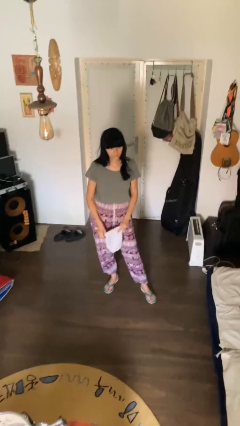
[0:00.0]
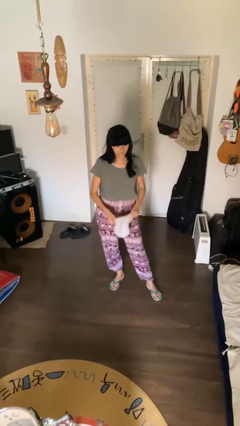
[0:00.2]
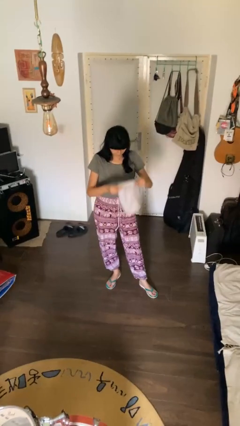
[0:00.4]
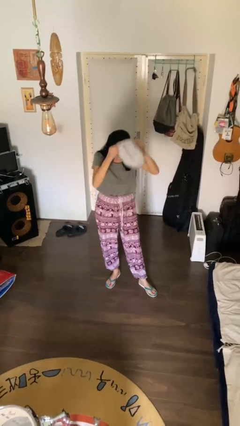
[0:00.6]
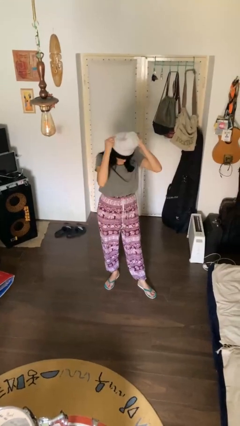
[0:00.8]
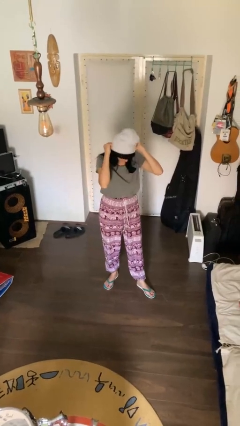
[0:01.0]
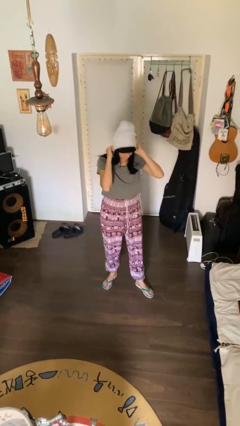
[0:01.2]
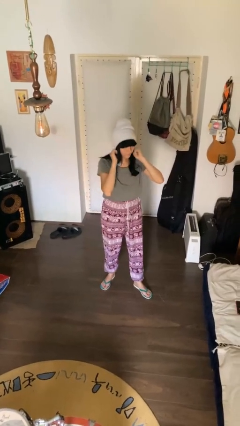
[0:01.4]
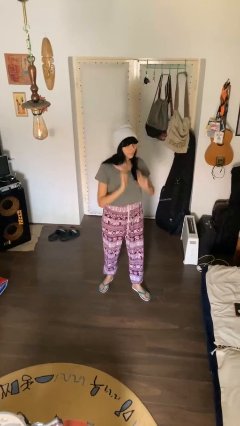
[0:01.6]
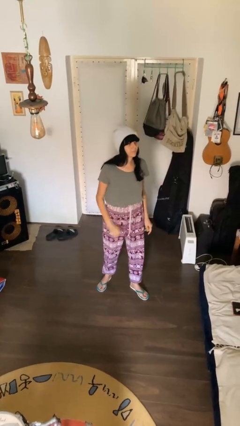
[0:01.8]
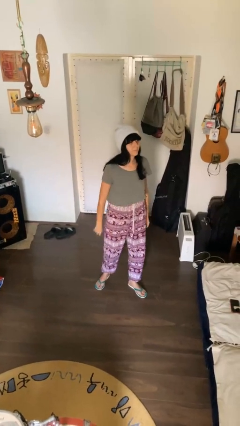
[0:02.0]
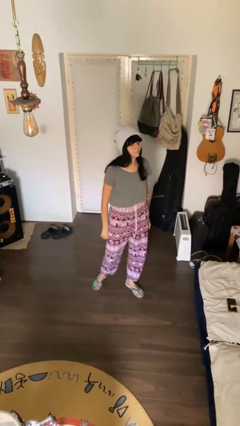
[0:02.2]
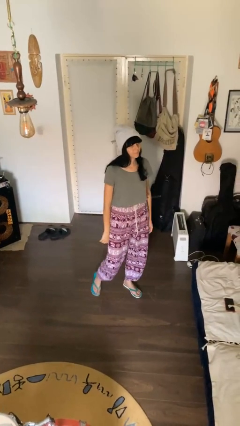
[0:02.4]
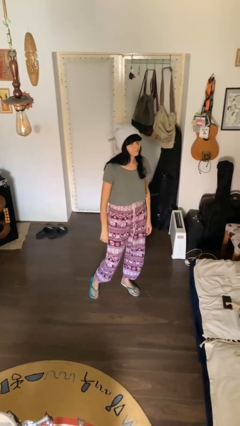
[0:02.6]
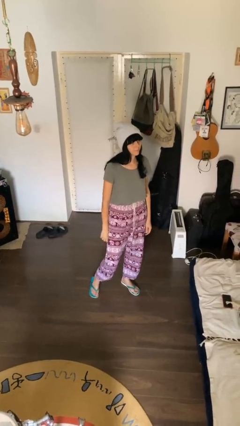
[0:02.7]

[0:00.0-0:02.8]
person puts on hat

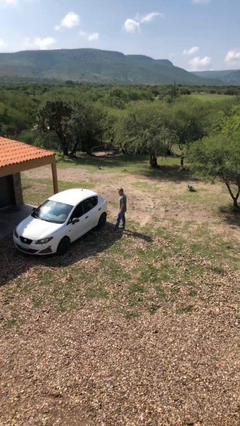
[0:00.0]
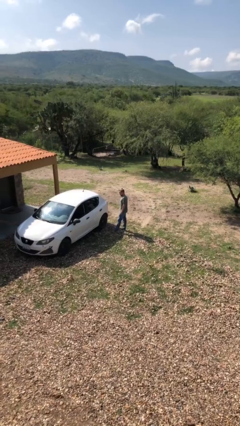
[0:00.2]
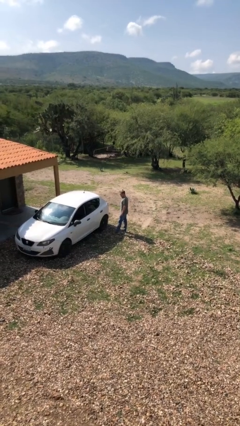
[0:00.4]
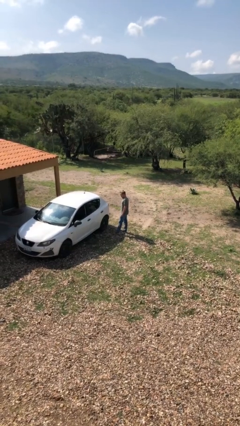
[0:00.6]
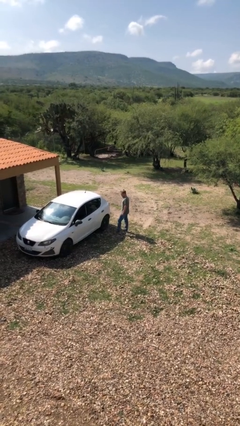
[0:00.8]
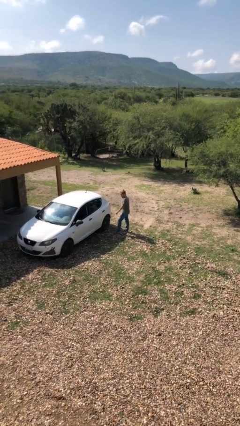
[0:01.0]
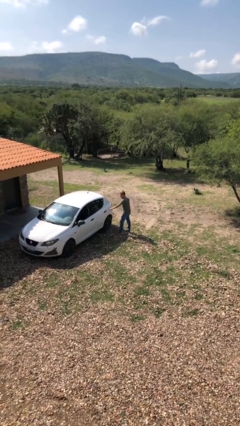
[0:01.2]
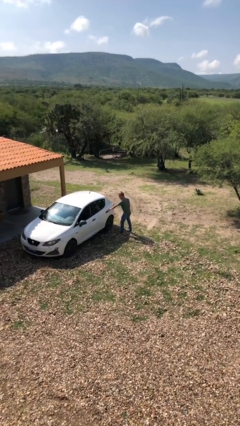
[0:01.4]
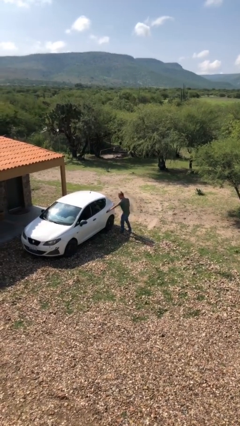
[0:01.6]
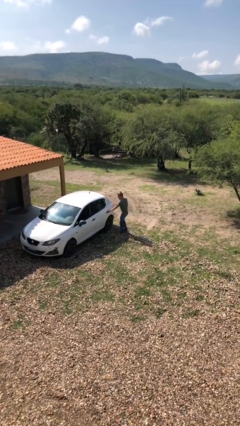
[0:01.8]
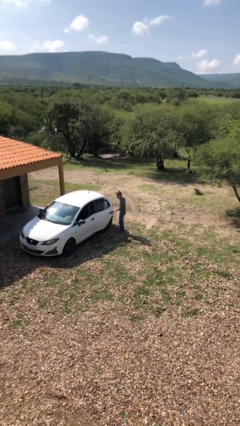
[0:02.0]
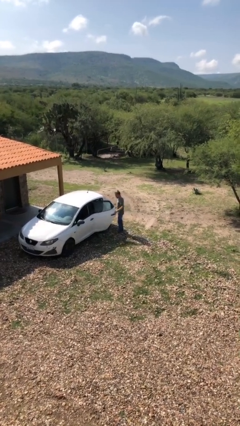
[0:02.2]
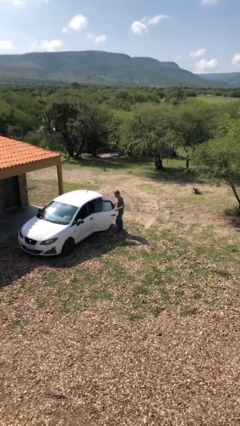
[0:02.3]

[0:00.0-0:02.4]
person opens car door

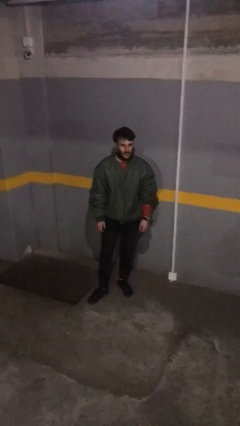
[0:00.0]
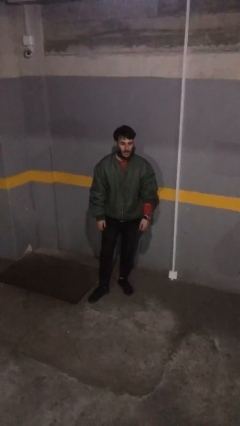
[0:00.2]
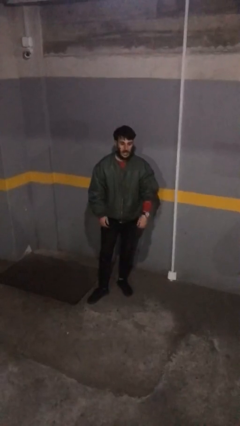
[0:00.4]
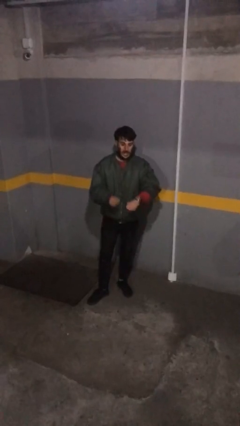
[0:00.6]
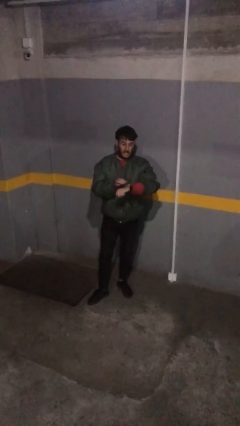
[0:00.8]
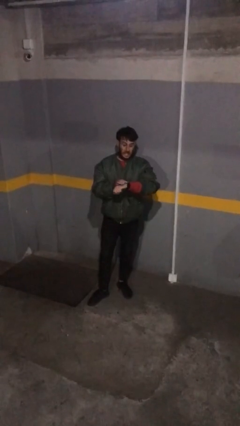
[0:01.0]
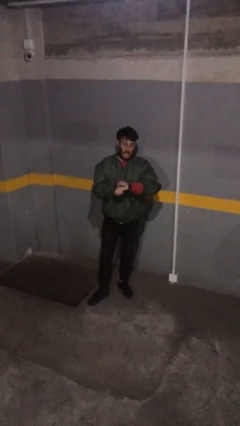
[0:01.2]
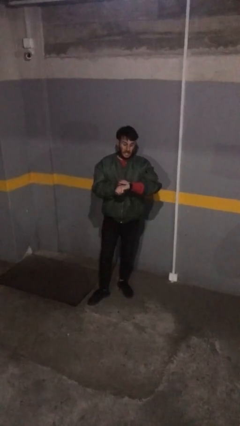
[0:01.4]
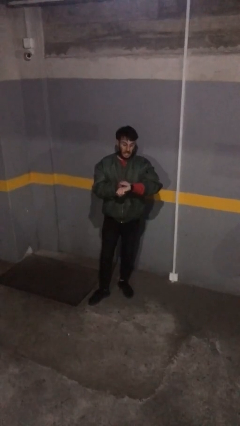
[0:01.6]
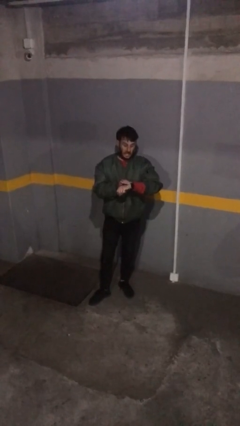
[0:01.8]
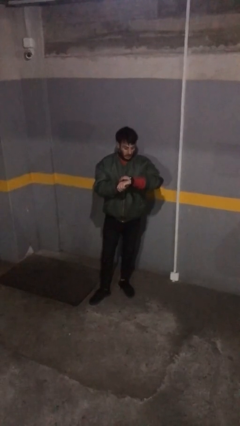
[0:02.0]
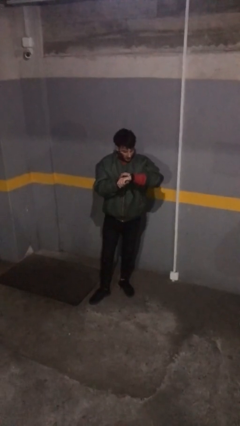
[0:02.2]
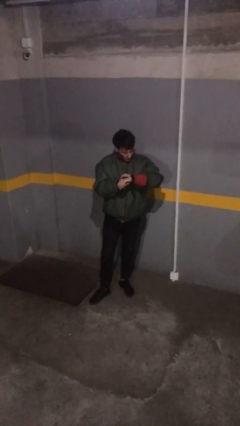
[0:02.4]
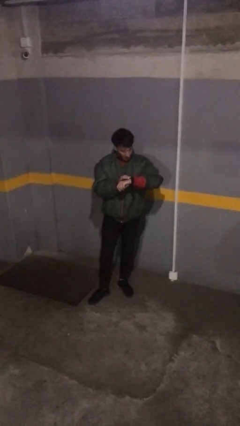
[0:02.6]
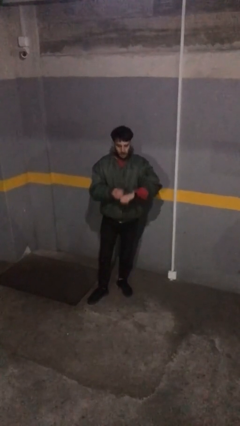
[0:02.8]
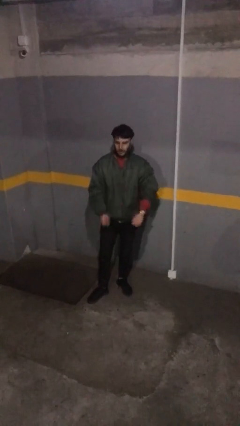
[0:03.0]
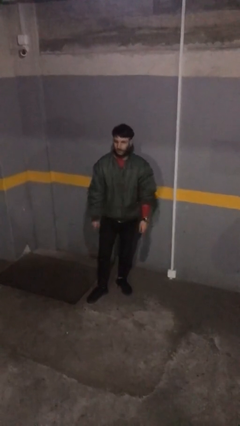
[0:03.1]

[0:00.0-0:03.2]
person looks at wristwatch

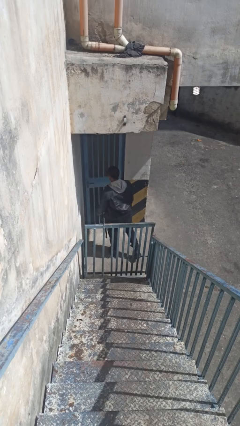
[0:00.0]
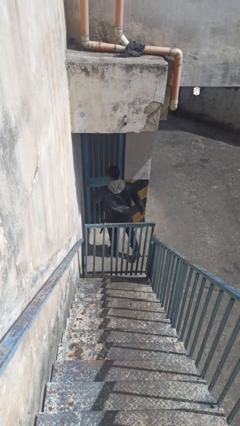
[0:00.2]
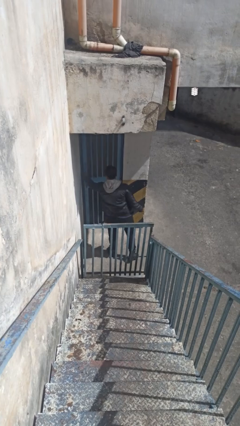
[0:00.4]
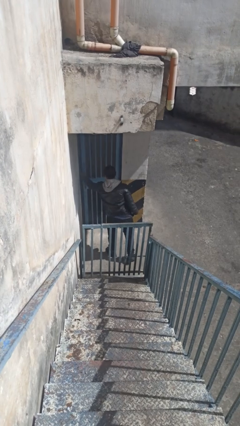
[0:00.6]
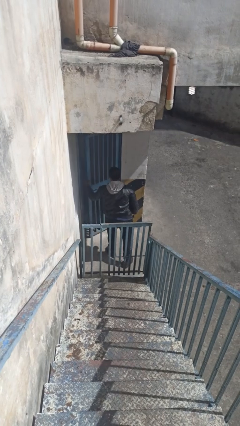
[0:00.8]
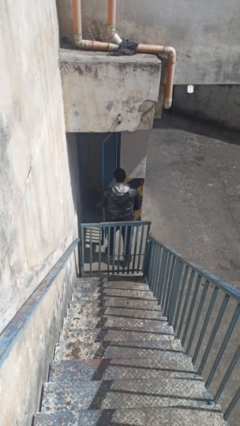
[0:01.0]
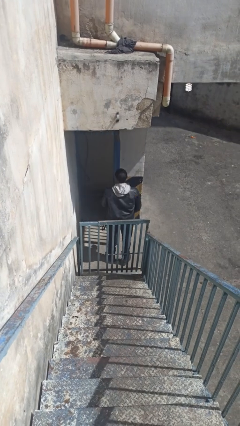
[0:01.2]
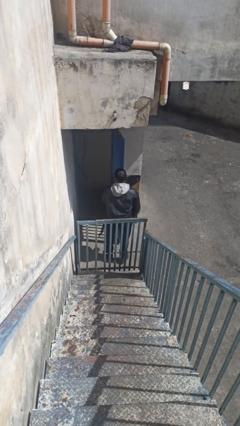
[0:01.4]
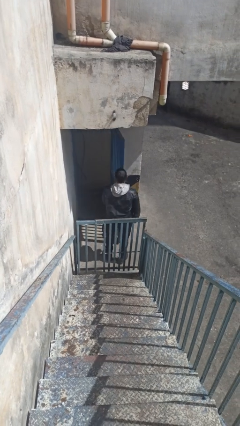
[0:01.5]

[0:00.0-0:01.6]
person opens facility door

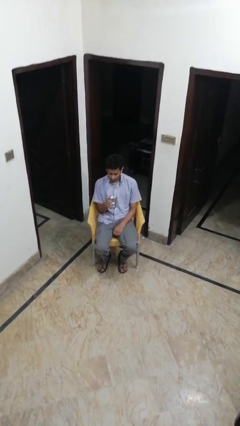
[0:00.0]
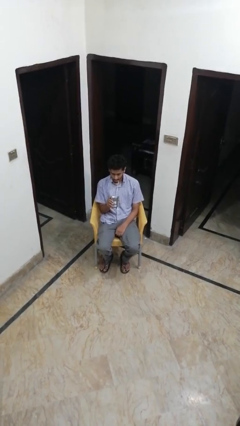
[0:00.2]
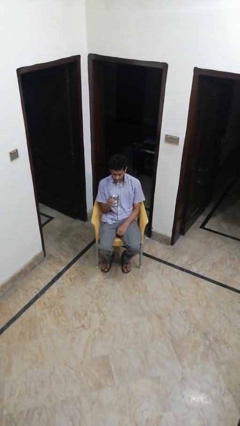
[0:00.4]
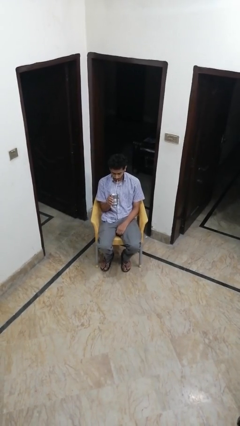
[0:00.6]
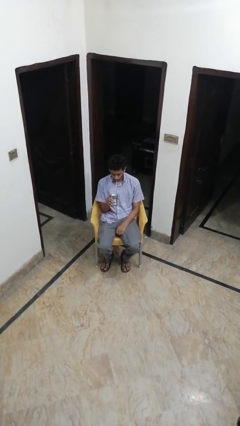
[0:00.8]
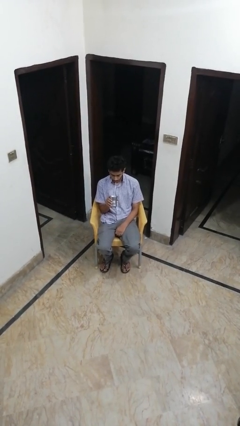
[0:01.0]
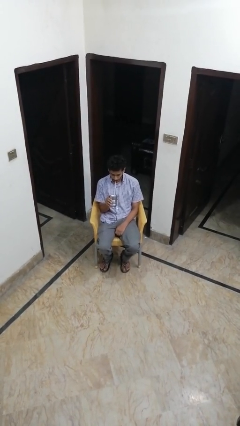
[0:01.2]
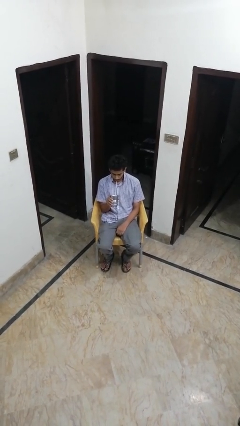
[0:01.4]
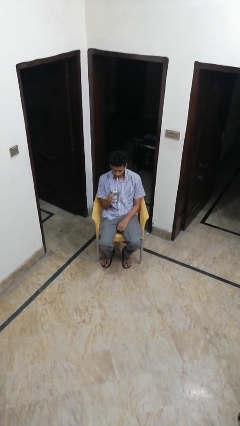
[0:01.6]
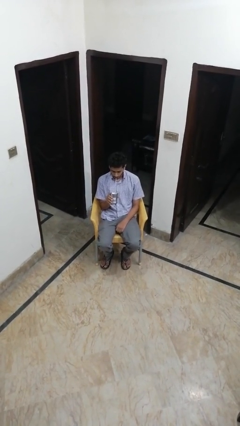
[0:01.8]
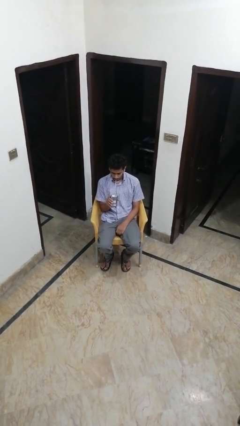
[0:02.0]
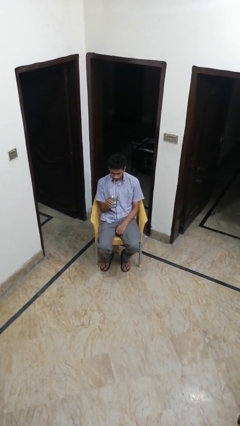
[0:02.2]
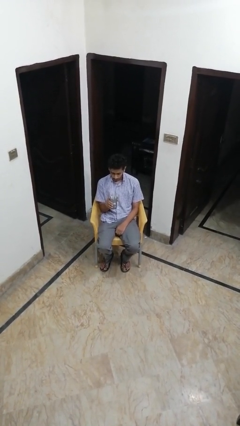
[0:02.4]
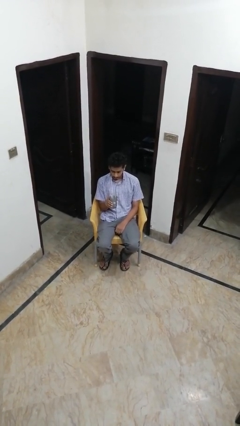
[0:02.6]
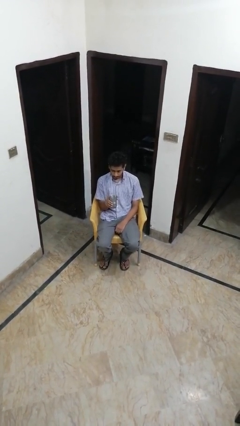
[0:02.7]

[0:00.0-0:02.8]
person drinks from straw

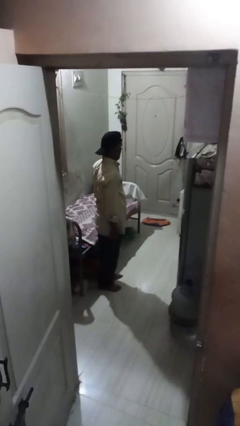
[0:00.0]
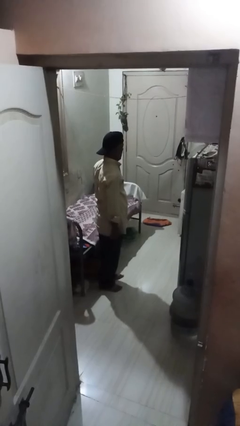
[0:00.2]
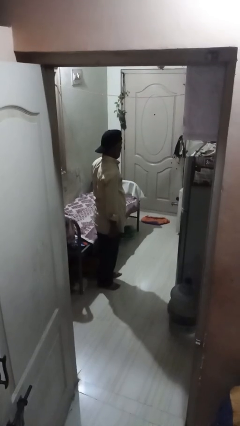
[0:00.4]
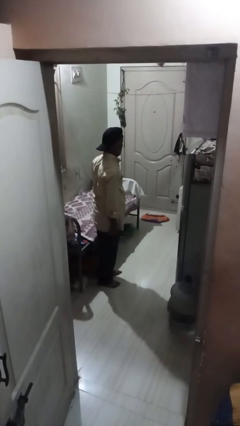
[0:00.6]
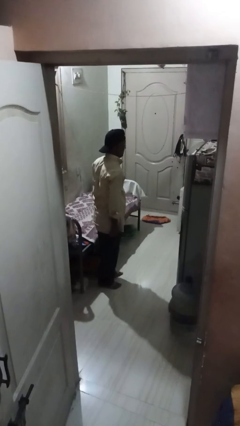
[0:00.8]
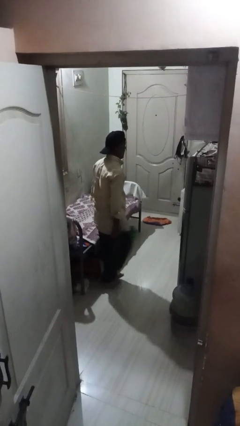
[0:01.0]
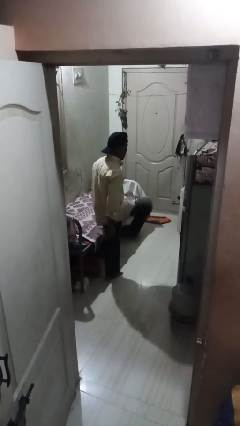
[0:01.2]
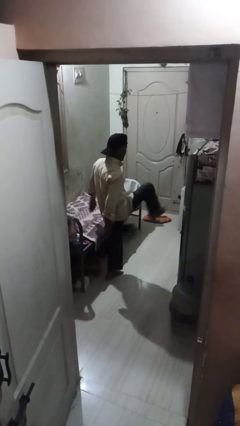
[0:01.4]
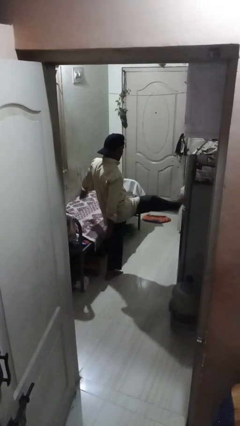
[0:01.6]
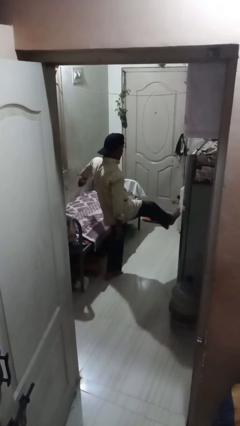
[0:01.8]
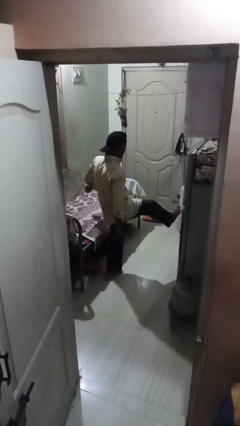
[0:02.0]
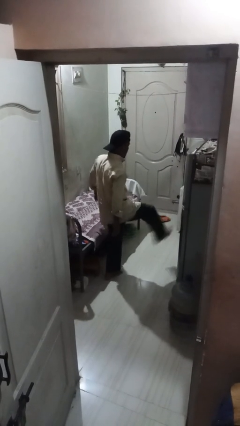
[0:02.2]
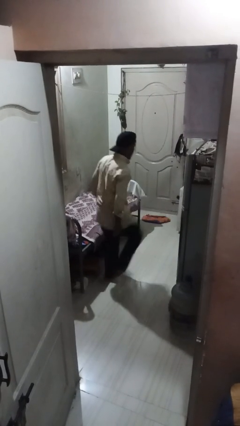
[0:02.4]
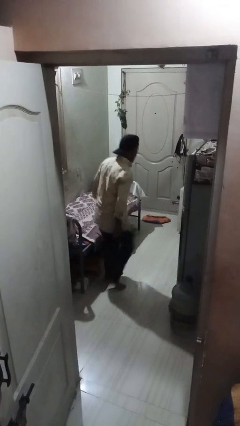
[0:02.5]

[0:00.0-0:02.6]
person karate kicks

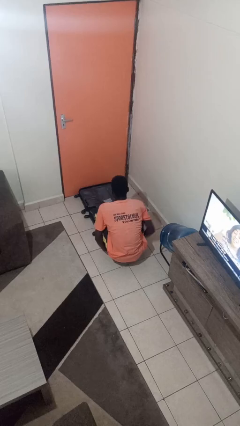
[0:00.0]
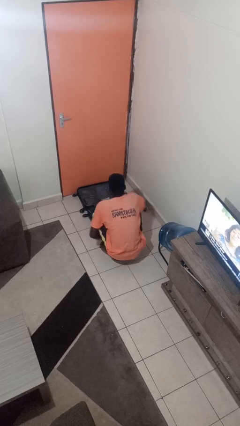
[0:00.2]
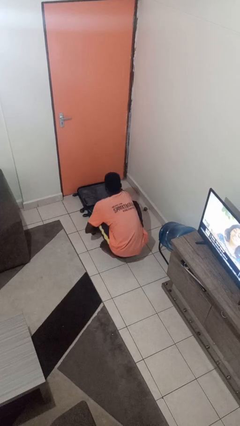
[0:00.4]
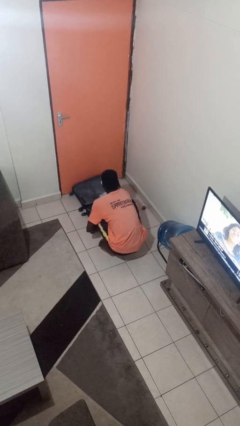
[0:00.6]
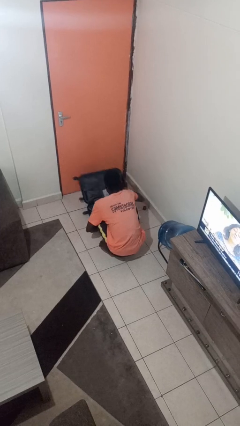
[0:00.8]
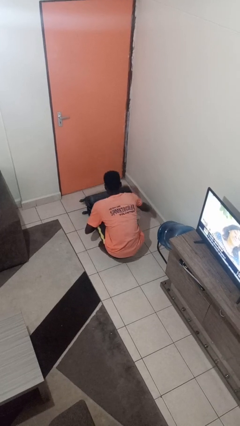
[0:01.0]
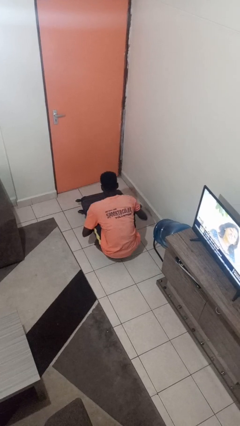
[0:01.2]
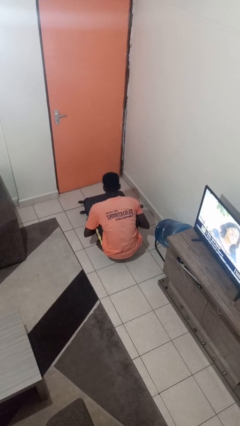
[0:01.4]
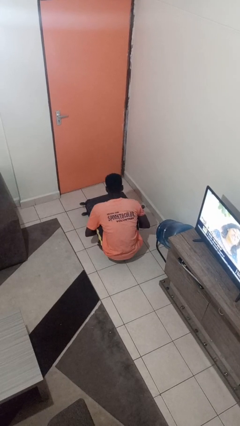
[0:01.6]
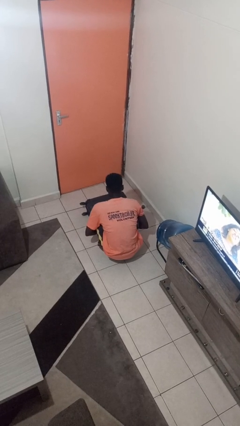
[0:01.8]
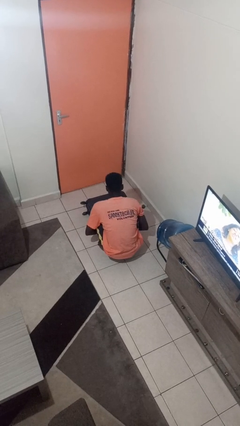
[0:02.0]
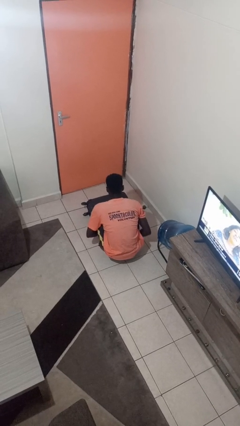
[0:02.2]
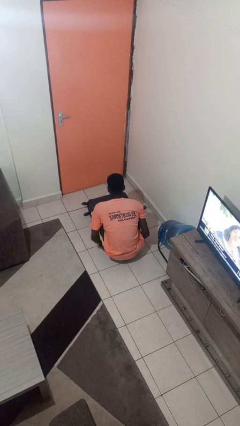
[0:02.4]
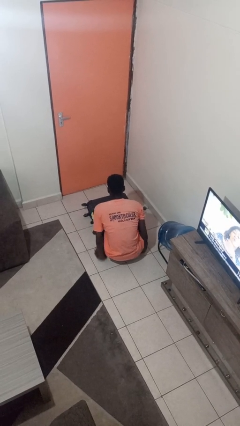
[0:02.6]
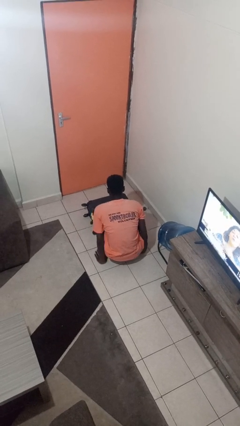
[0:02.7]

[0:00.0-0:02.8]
person closes suitcase
